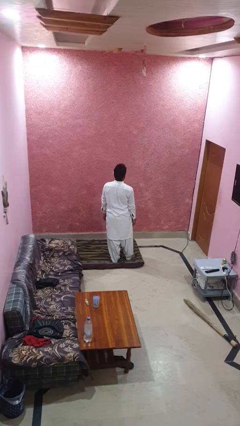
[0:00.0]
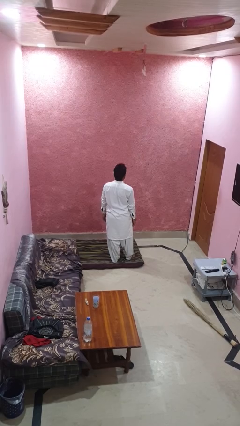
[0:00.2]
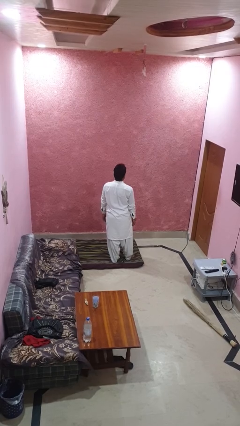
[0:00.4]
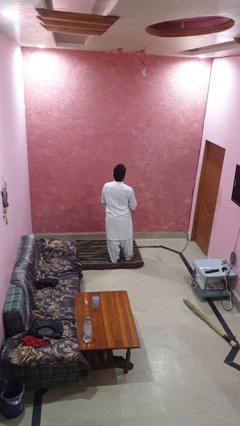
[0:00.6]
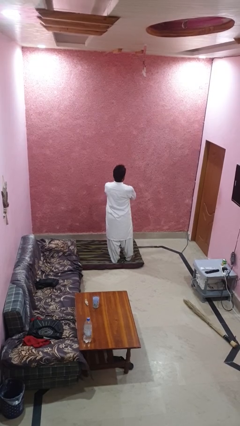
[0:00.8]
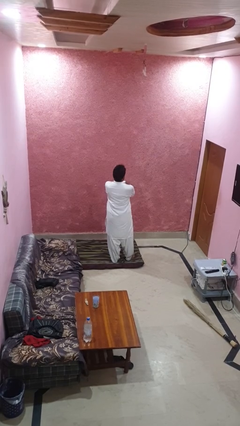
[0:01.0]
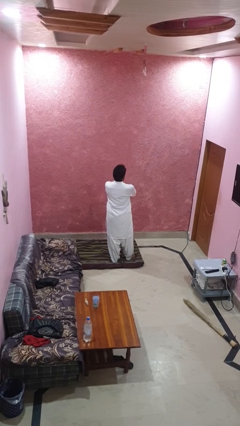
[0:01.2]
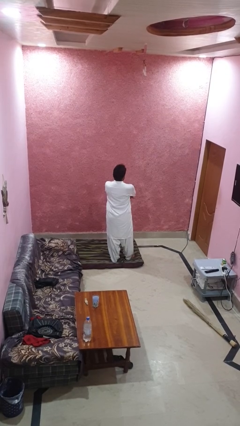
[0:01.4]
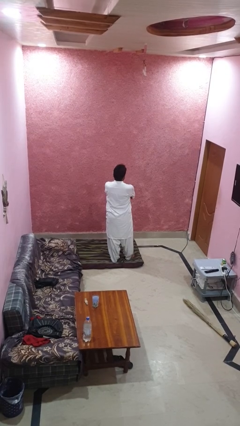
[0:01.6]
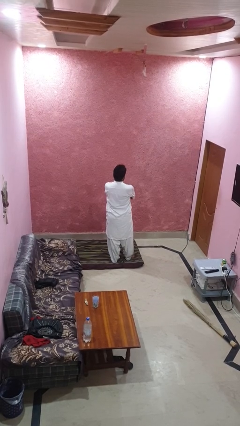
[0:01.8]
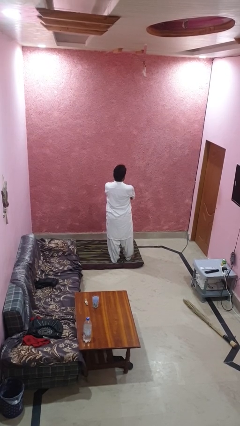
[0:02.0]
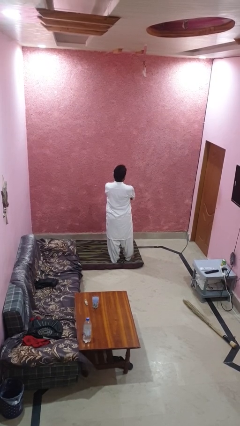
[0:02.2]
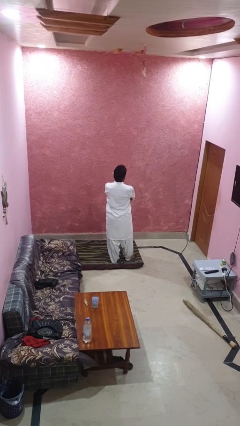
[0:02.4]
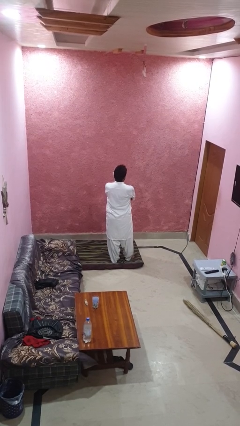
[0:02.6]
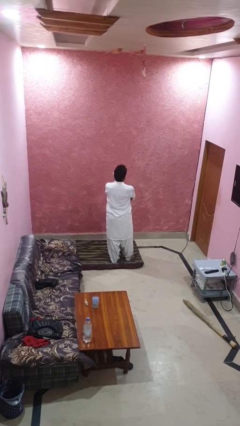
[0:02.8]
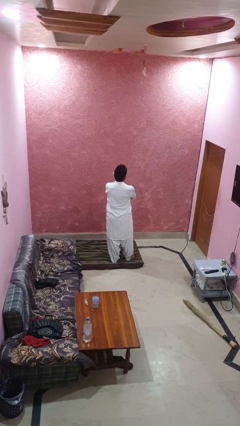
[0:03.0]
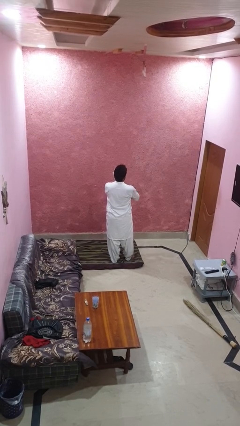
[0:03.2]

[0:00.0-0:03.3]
person crosses arms

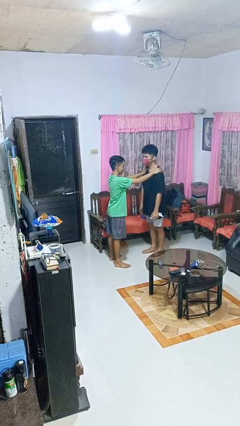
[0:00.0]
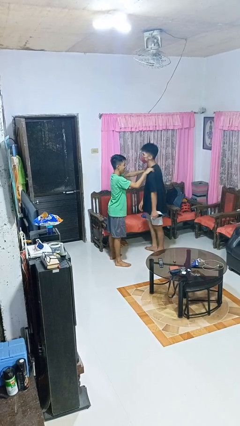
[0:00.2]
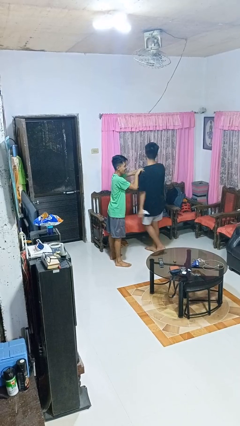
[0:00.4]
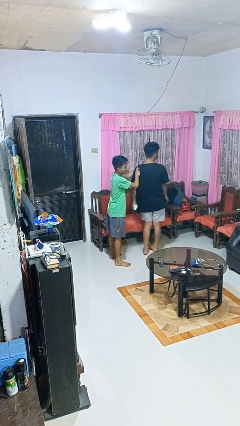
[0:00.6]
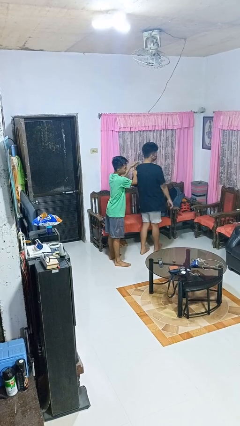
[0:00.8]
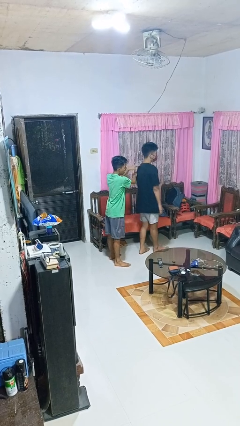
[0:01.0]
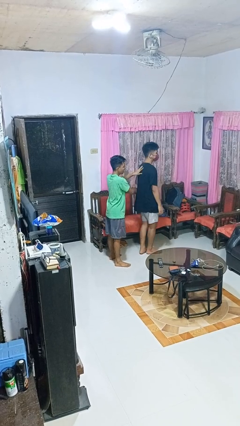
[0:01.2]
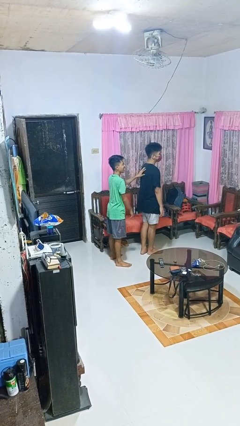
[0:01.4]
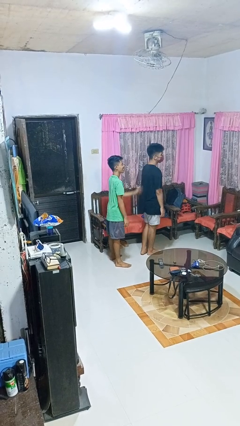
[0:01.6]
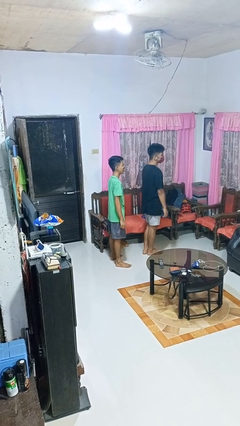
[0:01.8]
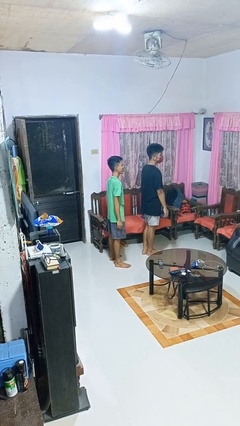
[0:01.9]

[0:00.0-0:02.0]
person spins person around

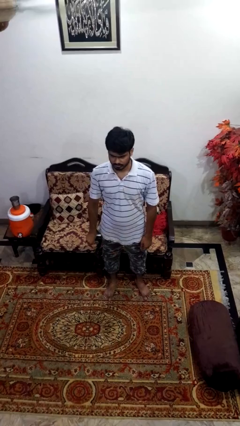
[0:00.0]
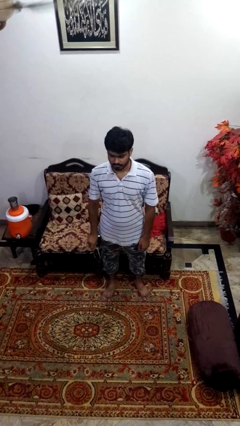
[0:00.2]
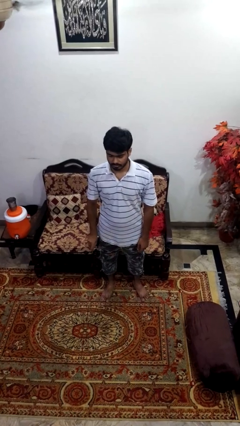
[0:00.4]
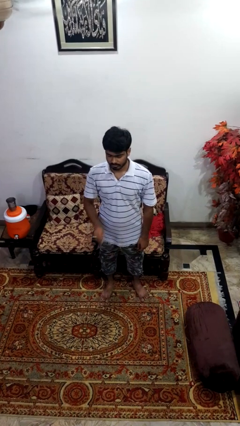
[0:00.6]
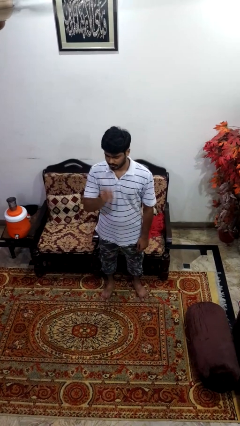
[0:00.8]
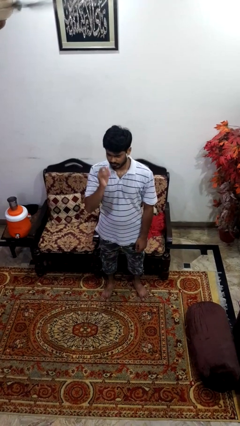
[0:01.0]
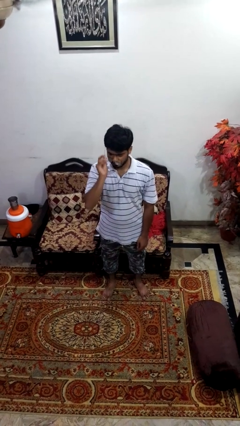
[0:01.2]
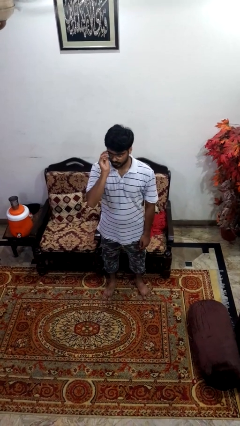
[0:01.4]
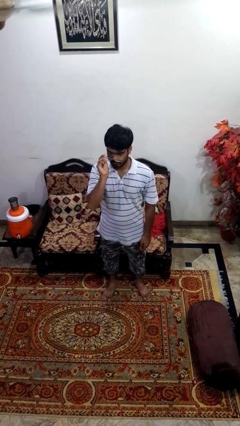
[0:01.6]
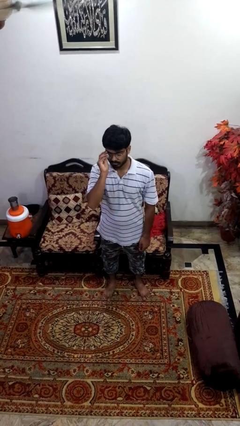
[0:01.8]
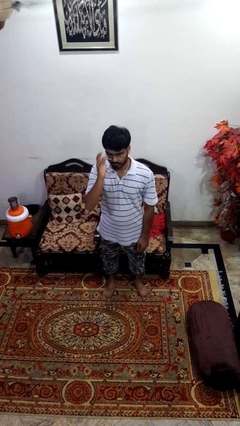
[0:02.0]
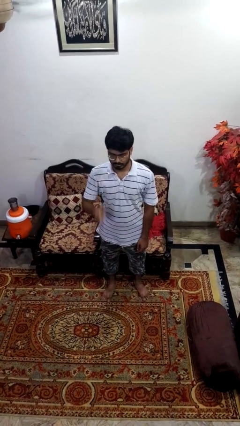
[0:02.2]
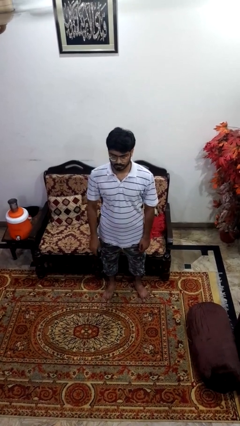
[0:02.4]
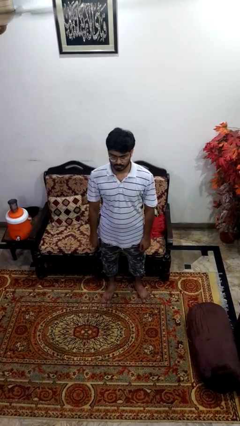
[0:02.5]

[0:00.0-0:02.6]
person puts on glasses

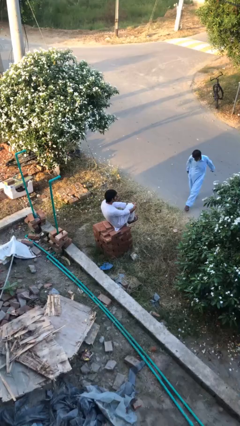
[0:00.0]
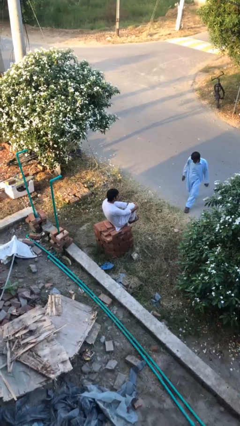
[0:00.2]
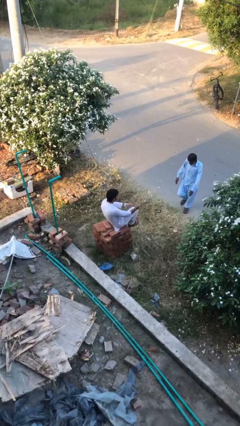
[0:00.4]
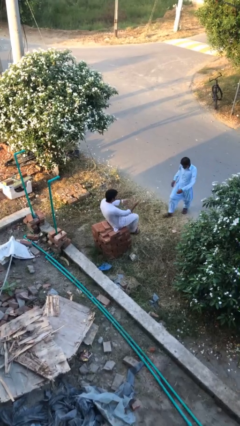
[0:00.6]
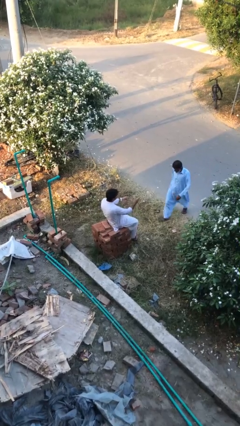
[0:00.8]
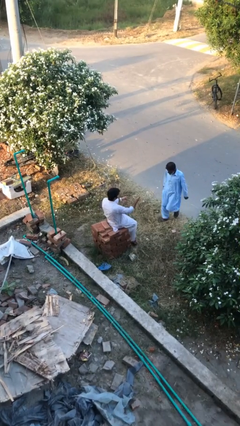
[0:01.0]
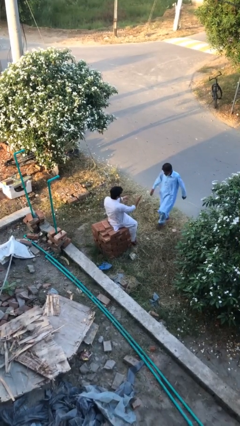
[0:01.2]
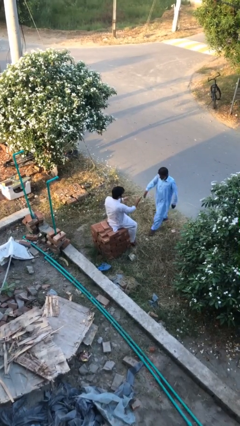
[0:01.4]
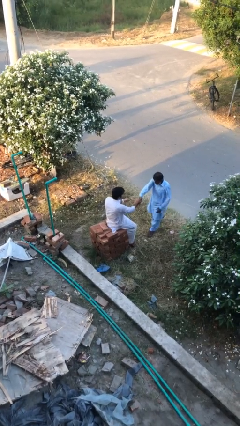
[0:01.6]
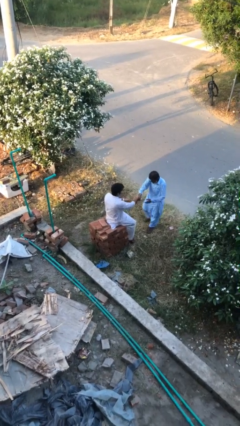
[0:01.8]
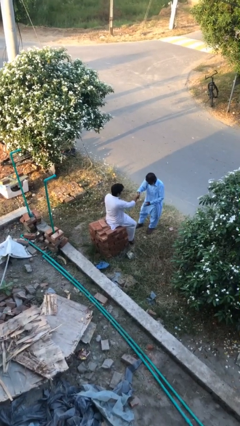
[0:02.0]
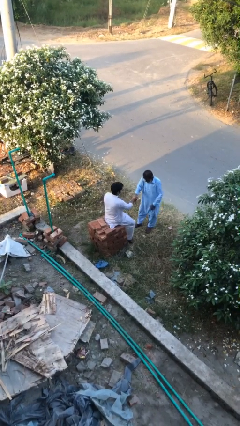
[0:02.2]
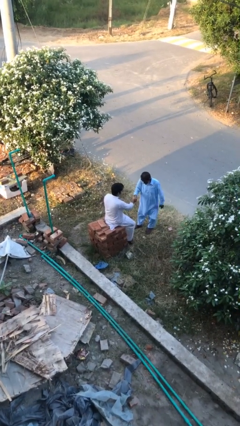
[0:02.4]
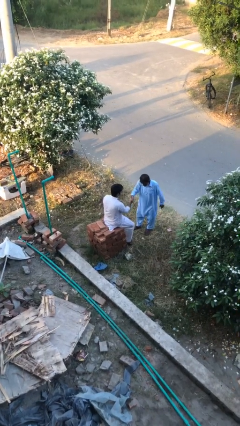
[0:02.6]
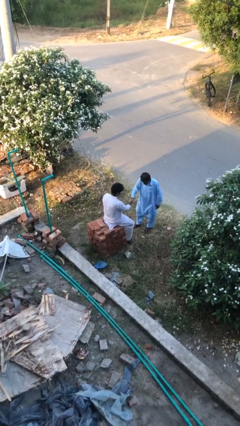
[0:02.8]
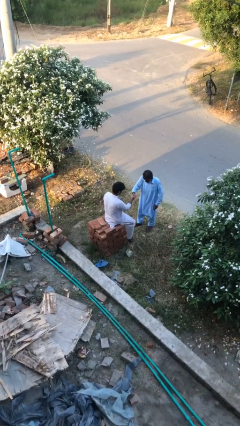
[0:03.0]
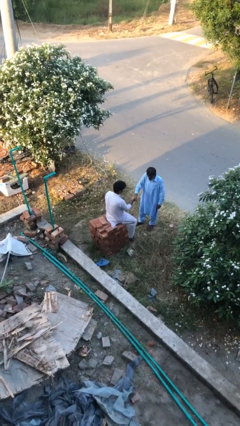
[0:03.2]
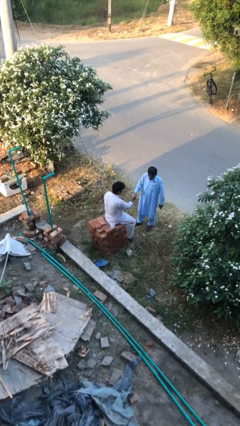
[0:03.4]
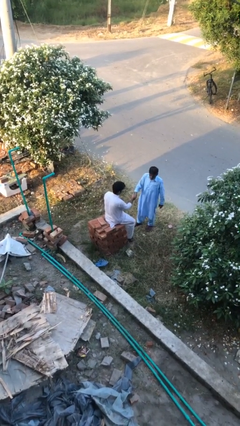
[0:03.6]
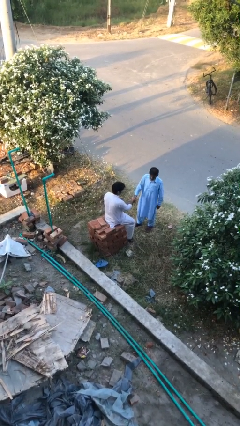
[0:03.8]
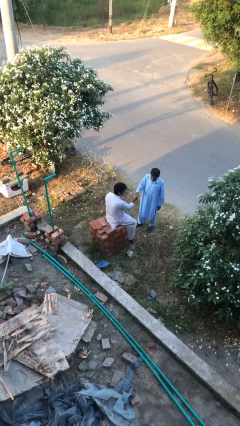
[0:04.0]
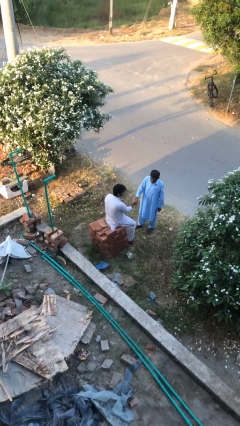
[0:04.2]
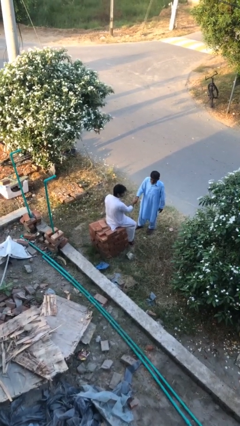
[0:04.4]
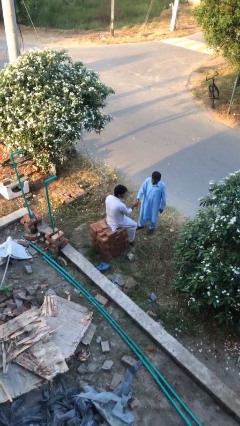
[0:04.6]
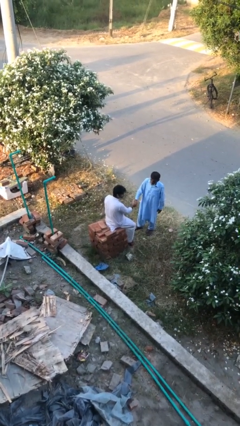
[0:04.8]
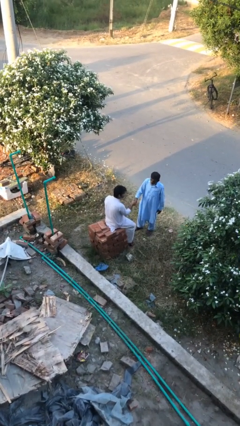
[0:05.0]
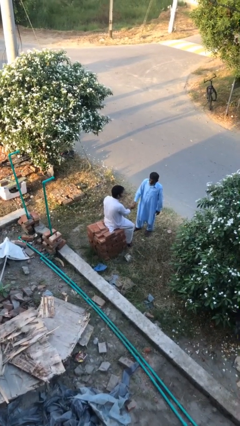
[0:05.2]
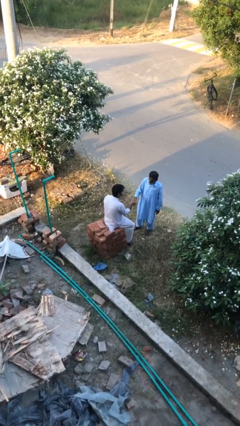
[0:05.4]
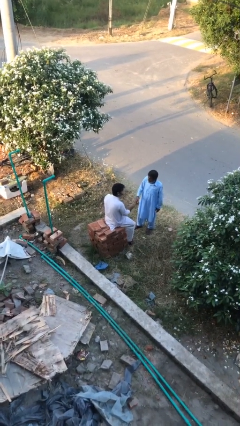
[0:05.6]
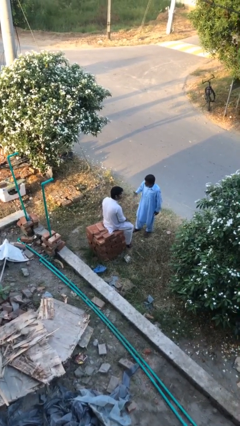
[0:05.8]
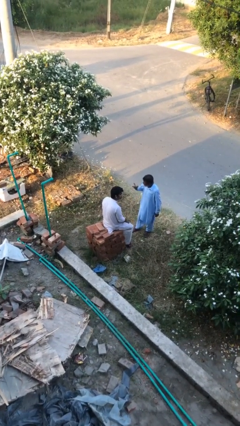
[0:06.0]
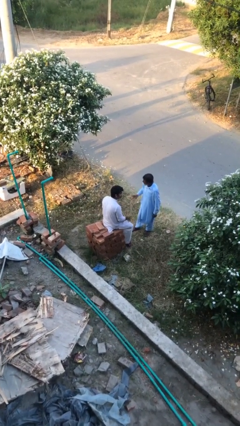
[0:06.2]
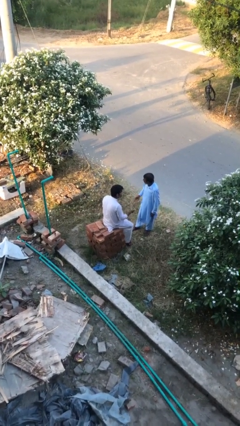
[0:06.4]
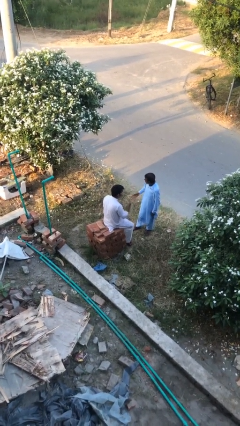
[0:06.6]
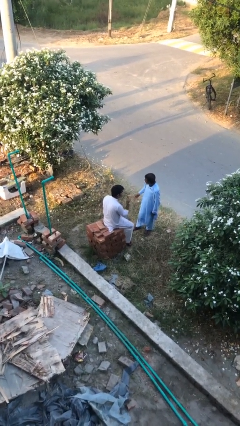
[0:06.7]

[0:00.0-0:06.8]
person shakes hand

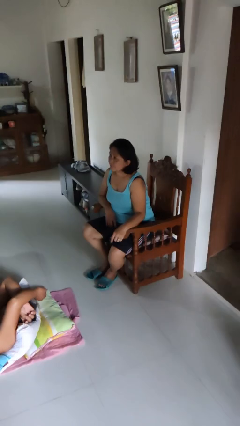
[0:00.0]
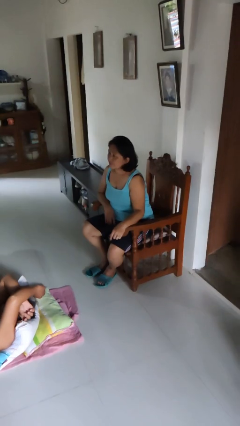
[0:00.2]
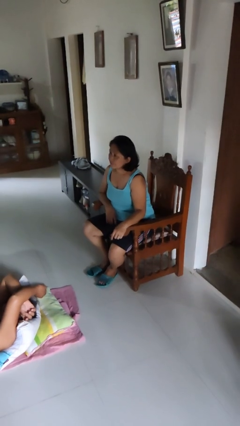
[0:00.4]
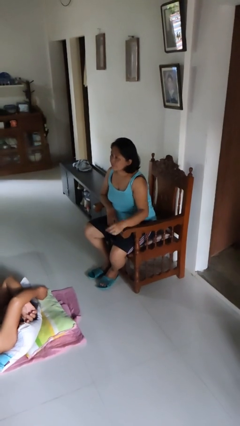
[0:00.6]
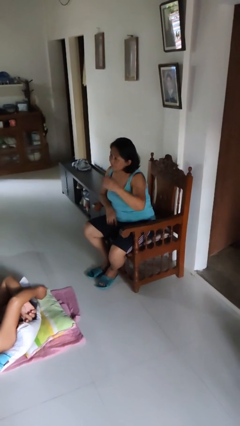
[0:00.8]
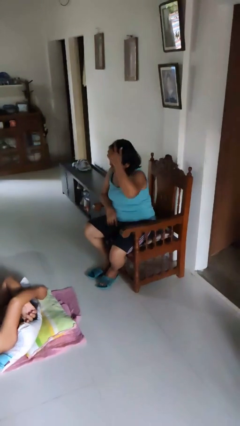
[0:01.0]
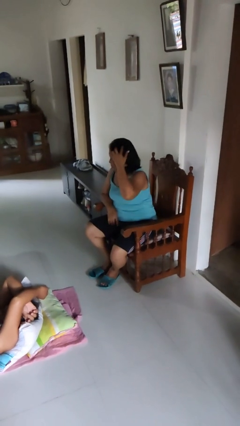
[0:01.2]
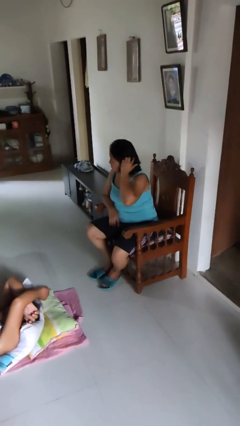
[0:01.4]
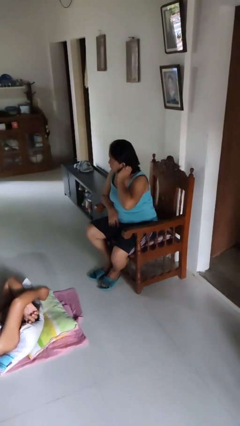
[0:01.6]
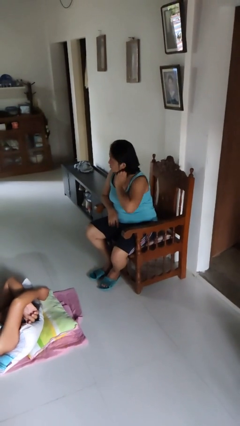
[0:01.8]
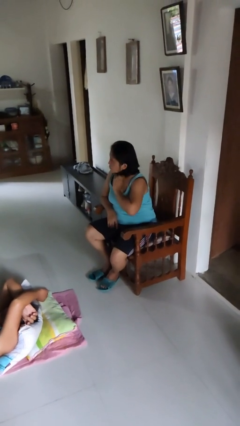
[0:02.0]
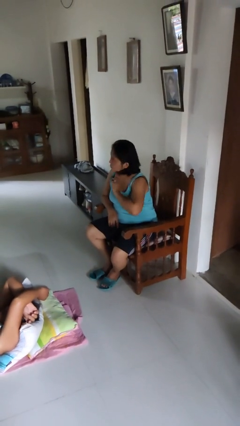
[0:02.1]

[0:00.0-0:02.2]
person strokes hair

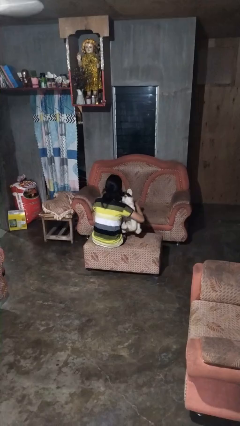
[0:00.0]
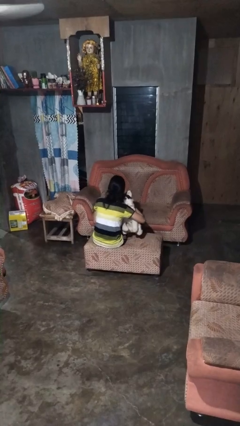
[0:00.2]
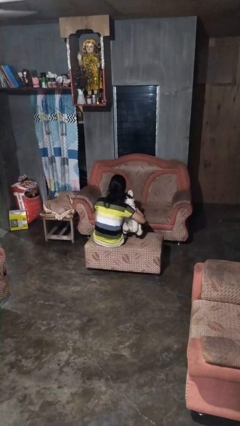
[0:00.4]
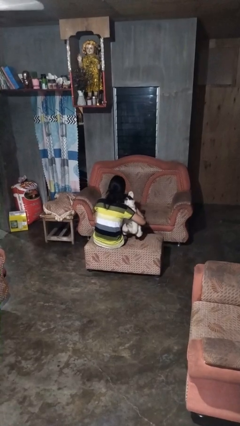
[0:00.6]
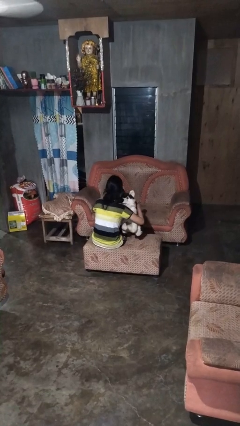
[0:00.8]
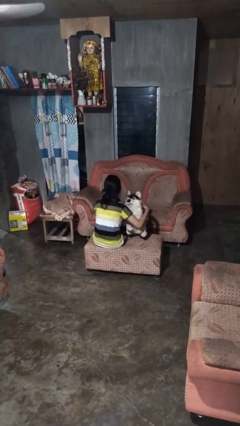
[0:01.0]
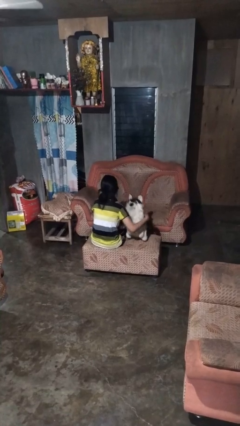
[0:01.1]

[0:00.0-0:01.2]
person hugs stuffed animal
